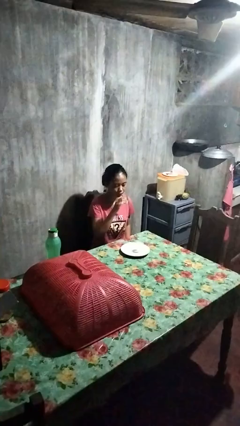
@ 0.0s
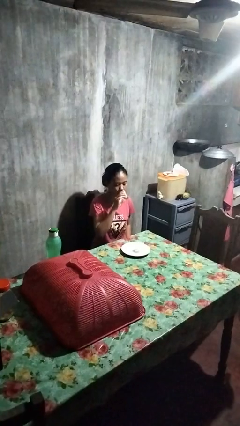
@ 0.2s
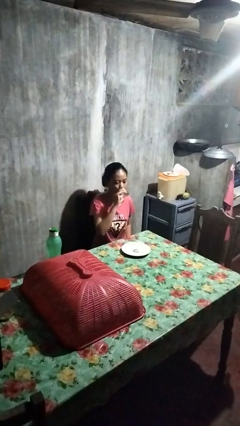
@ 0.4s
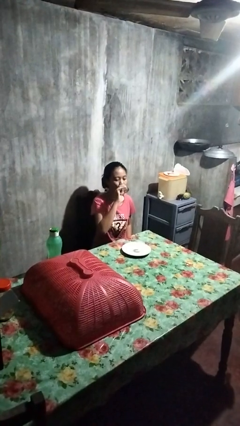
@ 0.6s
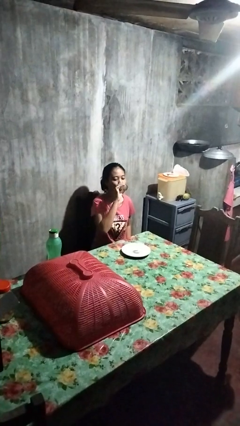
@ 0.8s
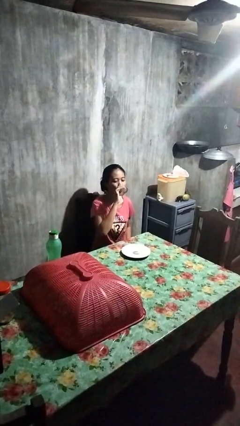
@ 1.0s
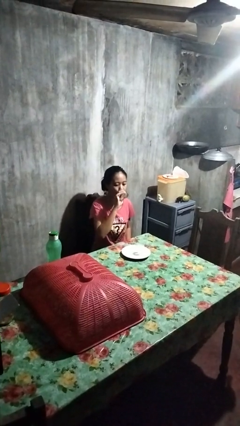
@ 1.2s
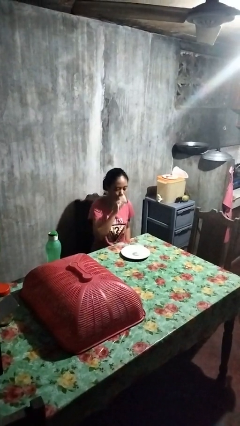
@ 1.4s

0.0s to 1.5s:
person drinks from shotglass

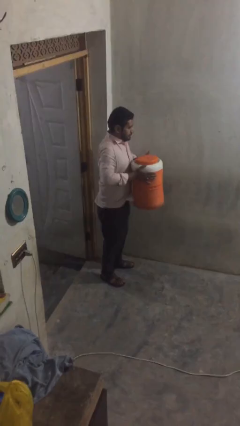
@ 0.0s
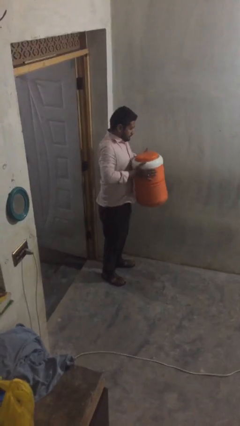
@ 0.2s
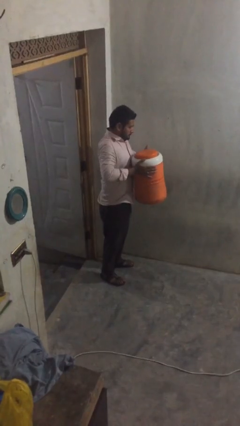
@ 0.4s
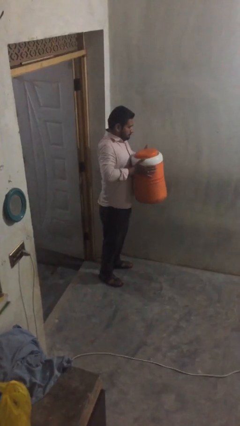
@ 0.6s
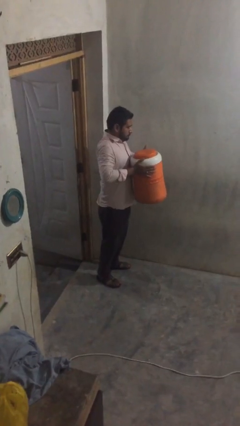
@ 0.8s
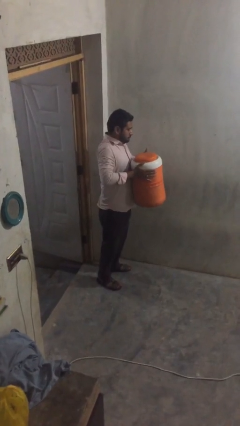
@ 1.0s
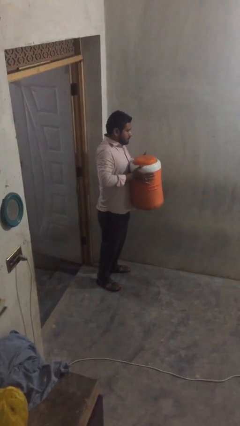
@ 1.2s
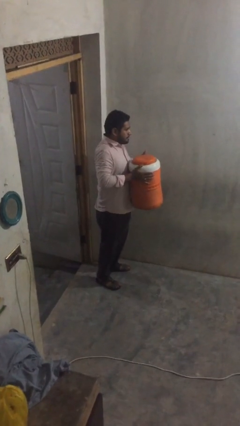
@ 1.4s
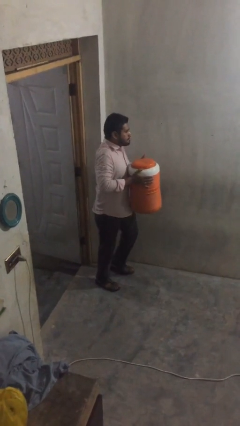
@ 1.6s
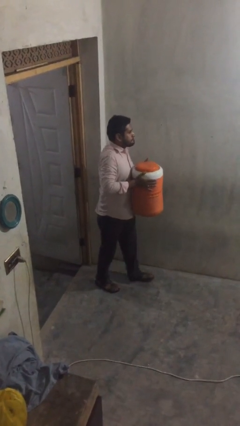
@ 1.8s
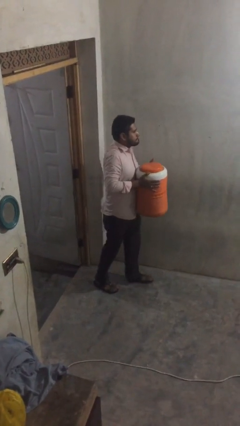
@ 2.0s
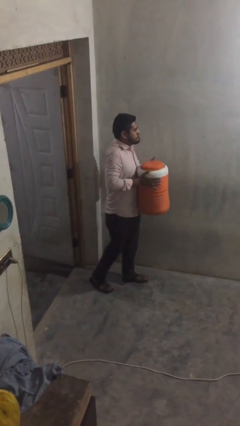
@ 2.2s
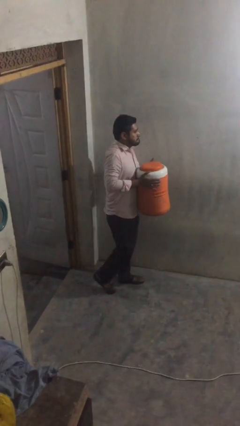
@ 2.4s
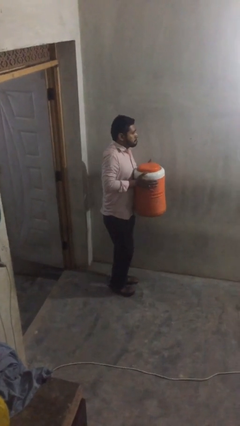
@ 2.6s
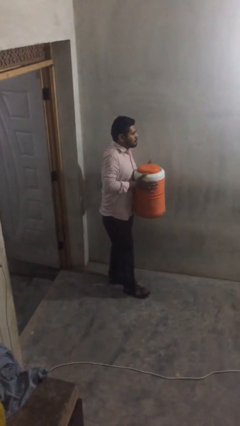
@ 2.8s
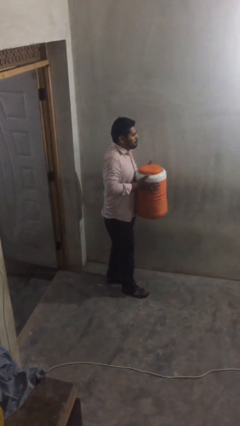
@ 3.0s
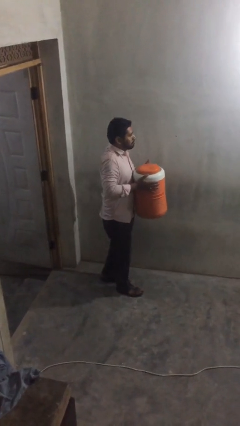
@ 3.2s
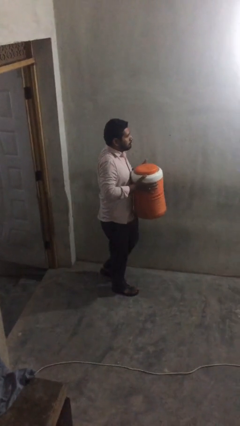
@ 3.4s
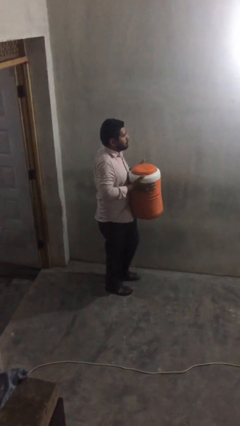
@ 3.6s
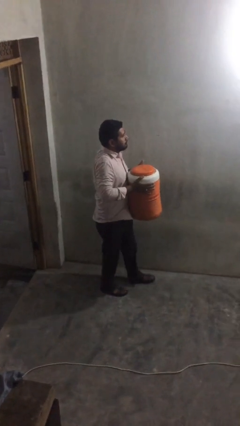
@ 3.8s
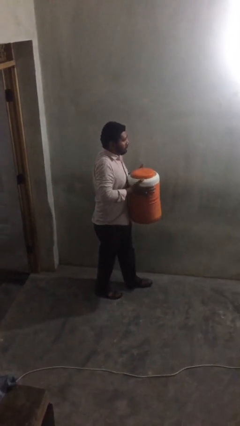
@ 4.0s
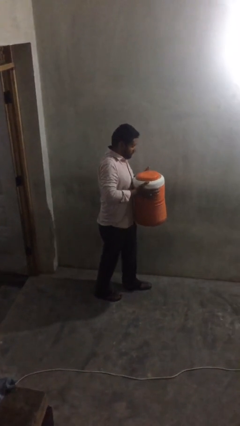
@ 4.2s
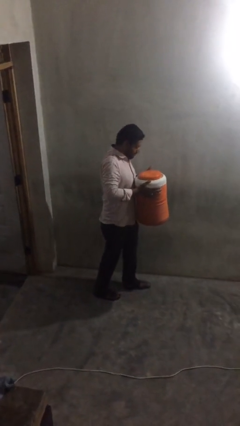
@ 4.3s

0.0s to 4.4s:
person carries heavy object

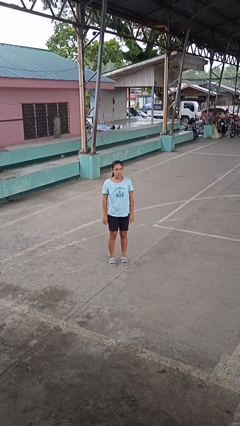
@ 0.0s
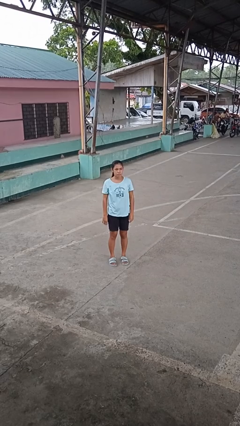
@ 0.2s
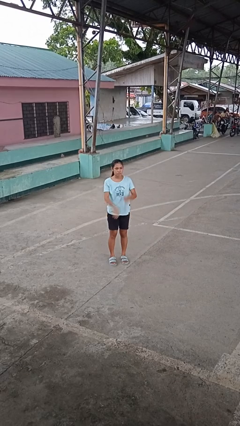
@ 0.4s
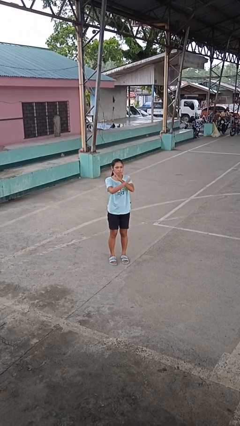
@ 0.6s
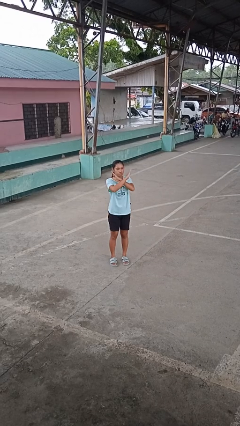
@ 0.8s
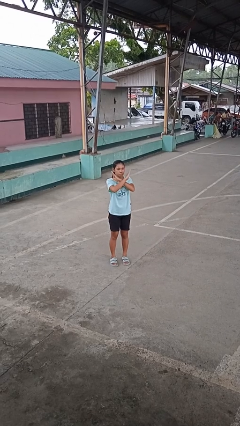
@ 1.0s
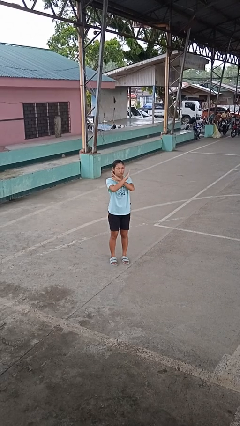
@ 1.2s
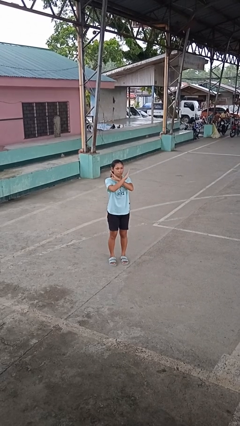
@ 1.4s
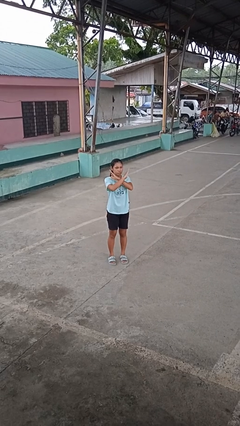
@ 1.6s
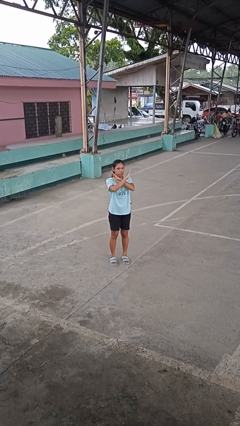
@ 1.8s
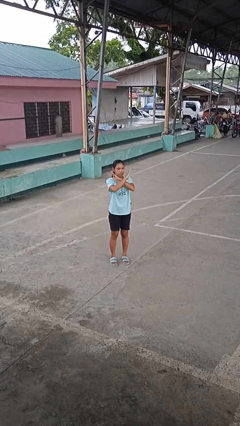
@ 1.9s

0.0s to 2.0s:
person gestures arms x

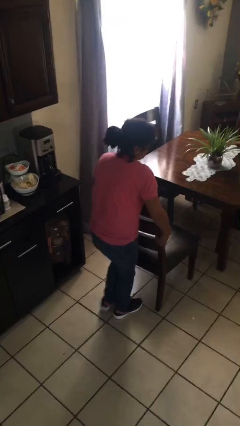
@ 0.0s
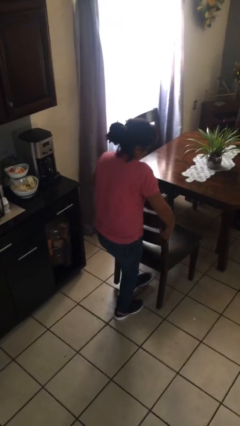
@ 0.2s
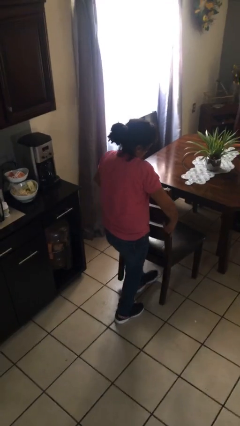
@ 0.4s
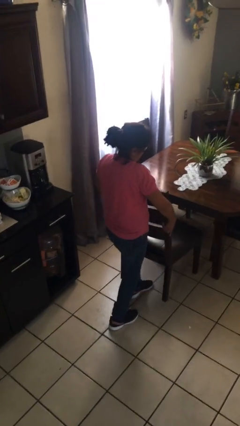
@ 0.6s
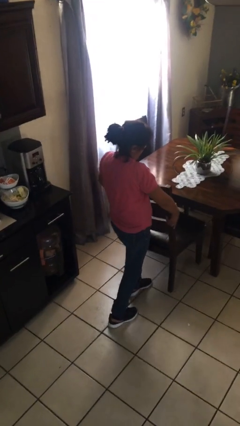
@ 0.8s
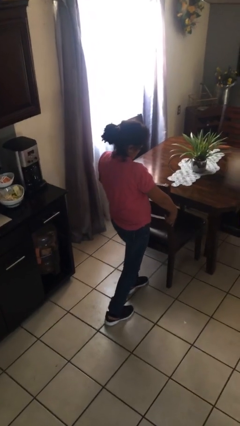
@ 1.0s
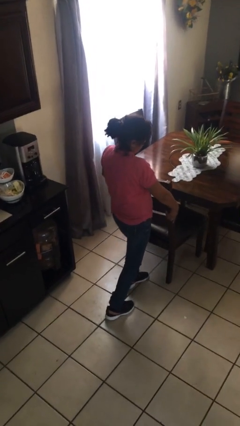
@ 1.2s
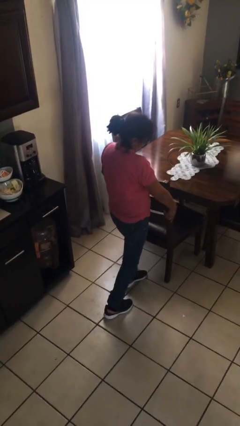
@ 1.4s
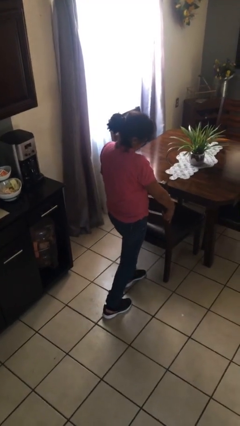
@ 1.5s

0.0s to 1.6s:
person pushes in chair

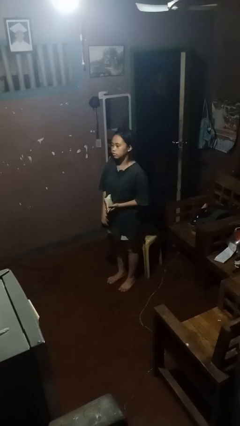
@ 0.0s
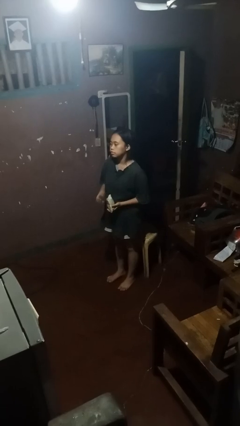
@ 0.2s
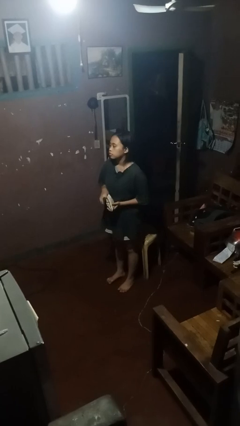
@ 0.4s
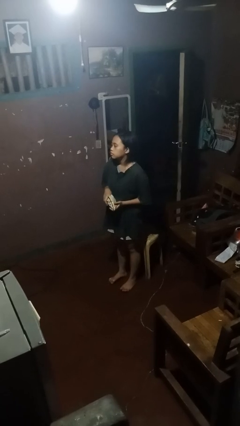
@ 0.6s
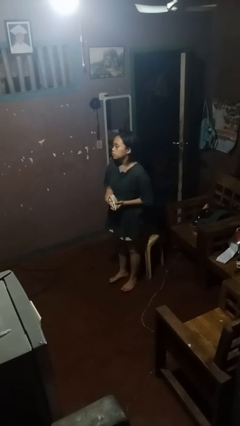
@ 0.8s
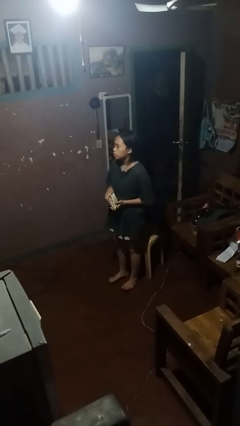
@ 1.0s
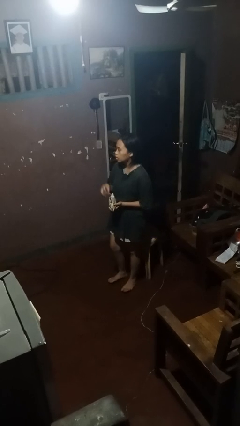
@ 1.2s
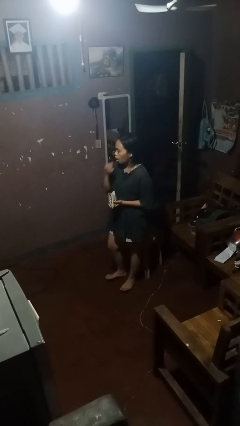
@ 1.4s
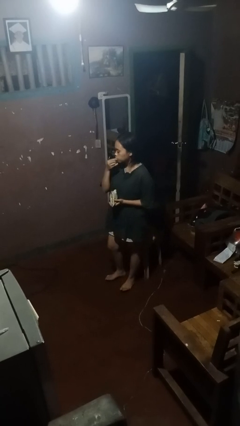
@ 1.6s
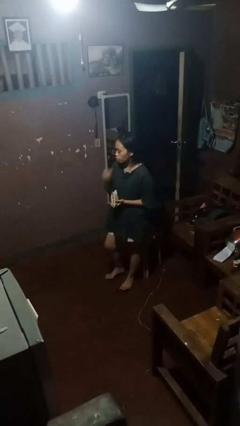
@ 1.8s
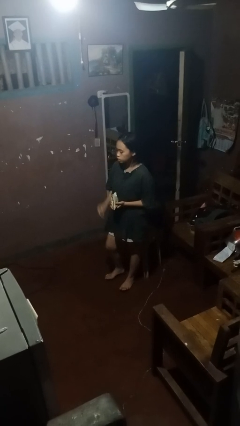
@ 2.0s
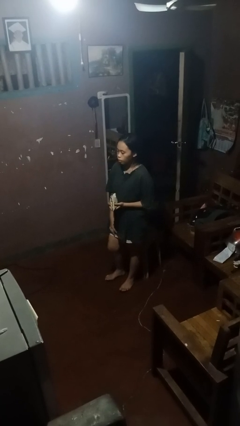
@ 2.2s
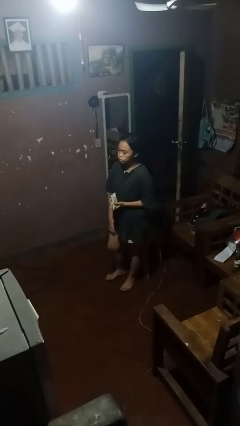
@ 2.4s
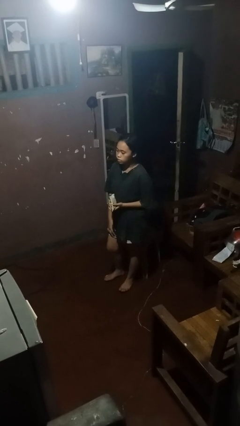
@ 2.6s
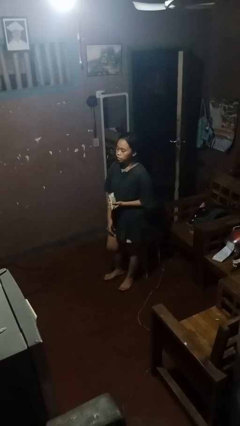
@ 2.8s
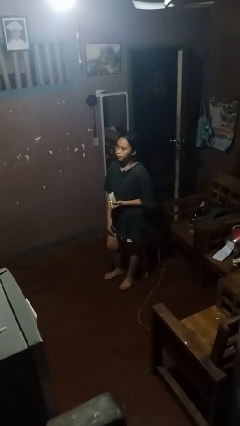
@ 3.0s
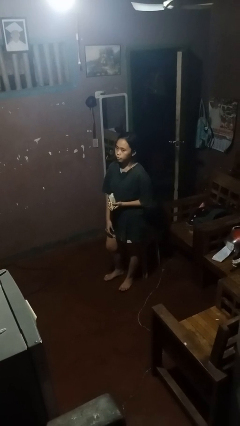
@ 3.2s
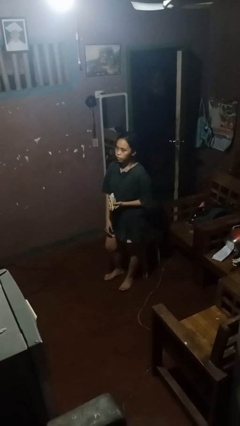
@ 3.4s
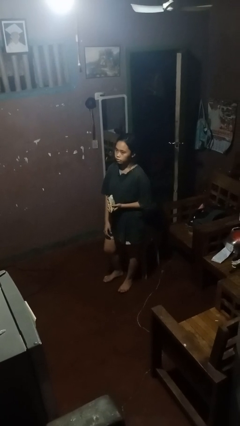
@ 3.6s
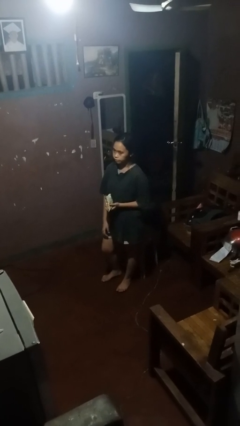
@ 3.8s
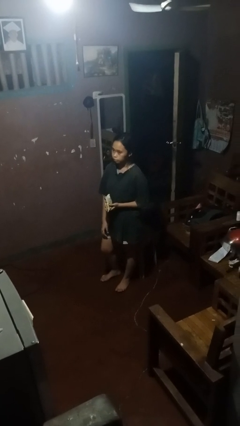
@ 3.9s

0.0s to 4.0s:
person eats snack from bag

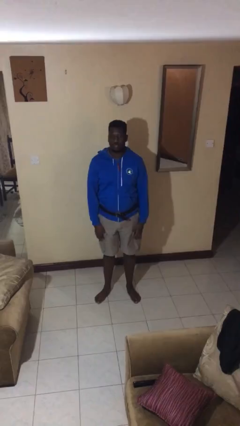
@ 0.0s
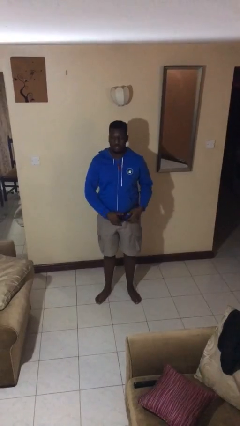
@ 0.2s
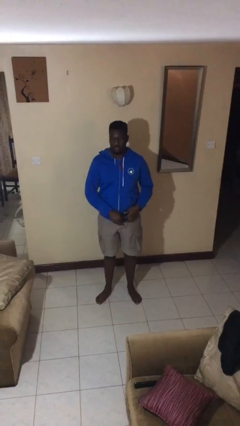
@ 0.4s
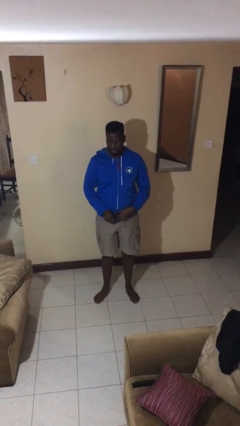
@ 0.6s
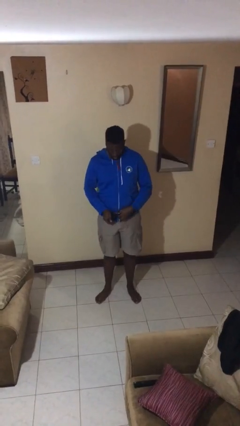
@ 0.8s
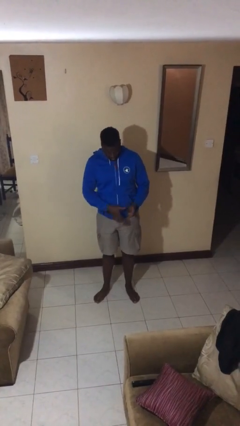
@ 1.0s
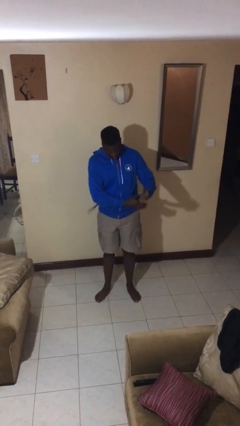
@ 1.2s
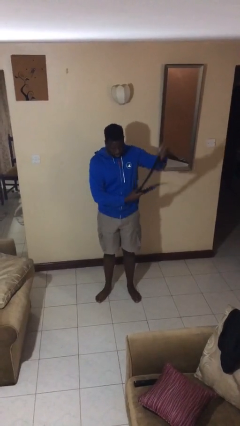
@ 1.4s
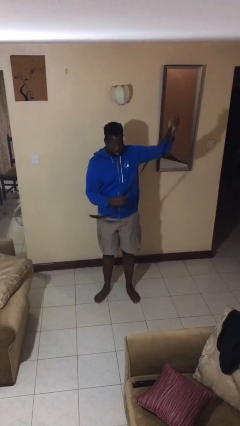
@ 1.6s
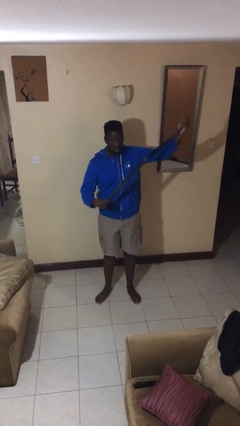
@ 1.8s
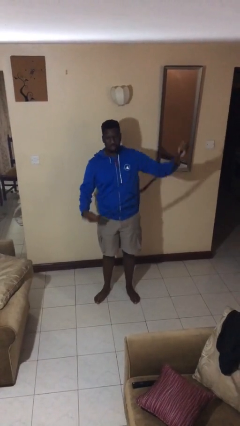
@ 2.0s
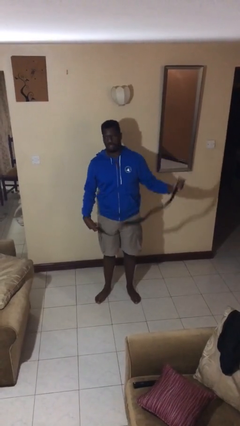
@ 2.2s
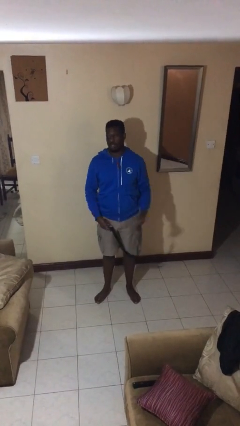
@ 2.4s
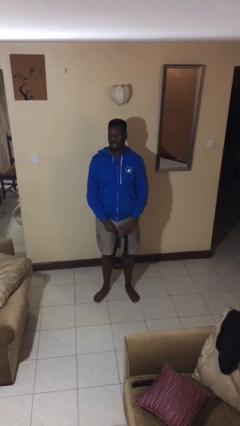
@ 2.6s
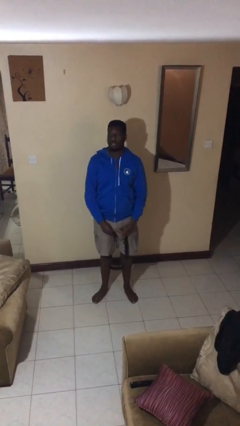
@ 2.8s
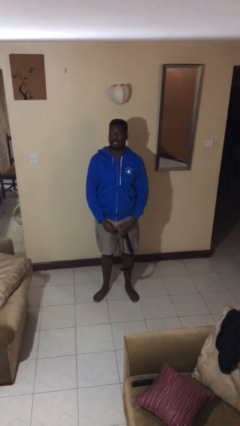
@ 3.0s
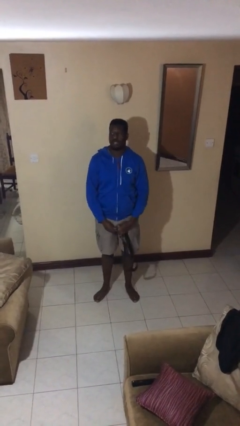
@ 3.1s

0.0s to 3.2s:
person takes off belt

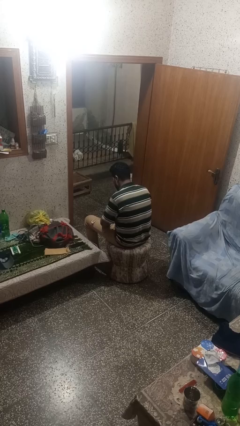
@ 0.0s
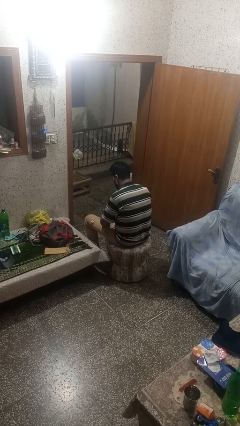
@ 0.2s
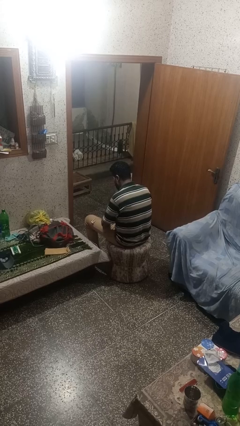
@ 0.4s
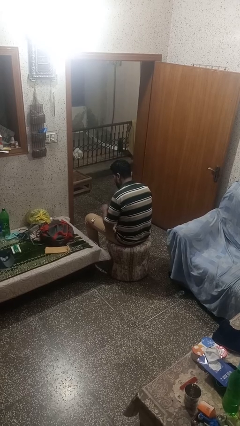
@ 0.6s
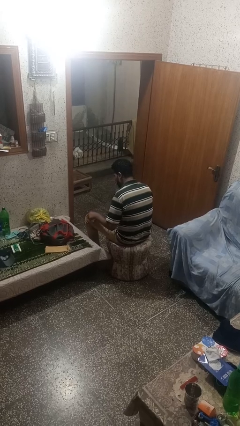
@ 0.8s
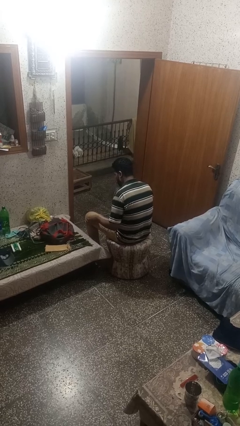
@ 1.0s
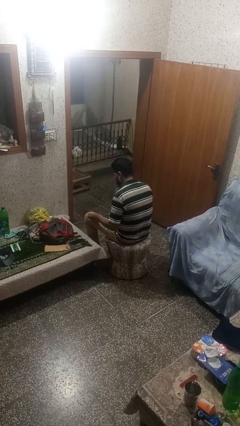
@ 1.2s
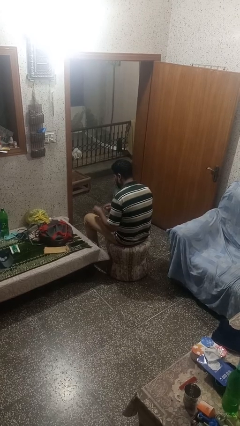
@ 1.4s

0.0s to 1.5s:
person puts on headphones
